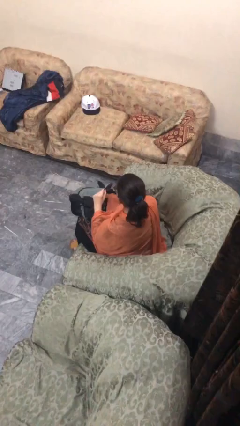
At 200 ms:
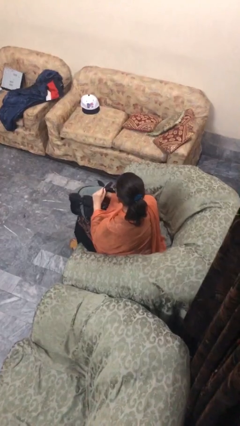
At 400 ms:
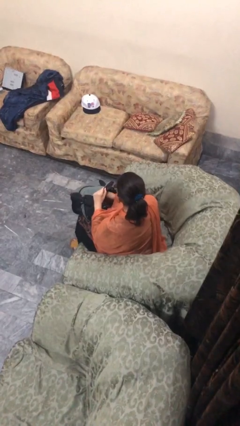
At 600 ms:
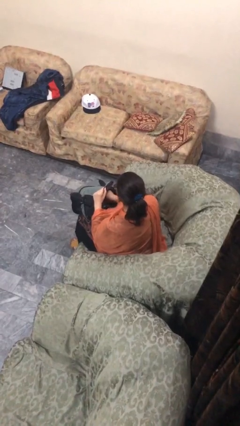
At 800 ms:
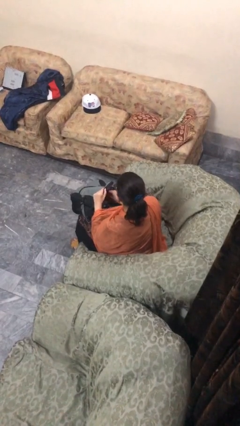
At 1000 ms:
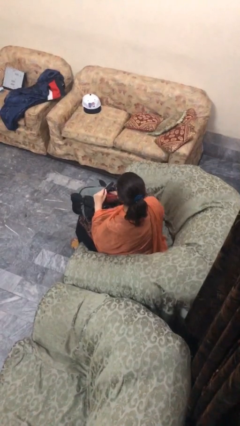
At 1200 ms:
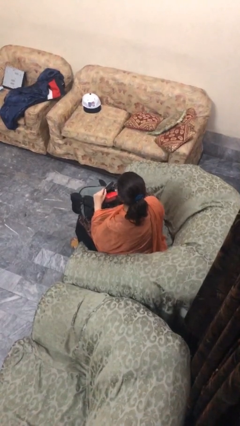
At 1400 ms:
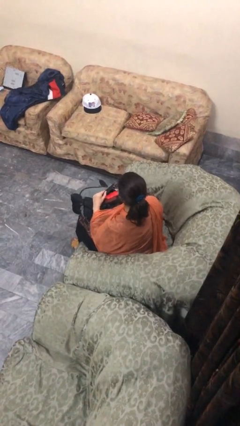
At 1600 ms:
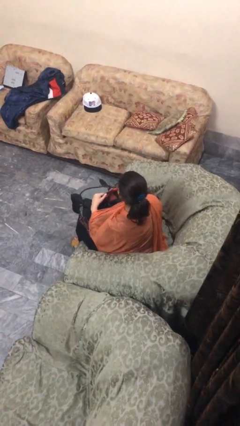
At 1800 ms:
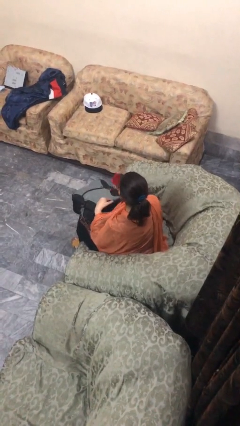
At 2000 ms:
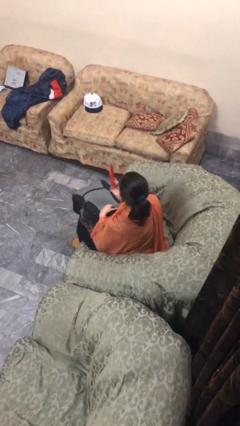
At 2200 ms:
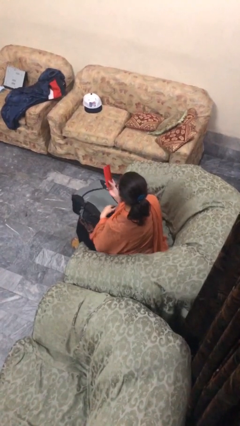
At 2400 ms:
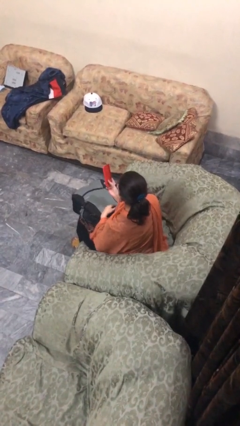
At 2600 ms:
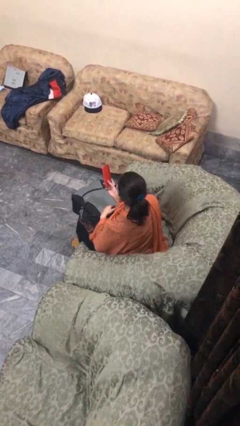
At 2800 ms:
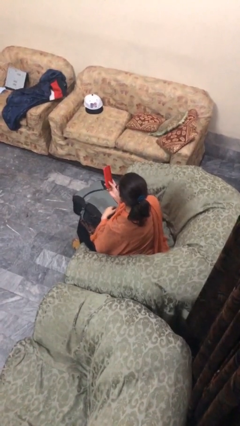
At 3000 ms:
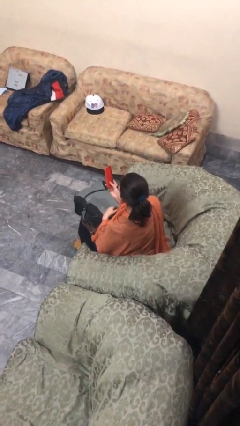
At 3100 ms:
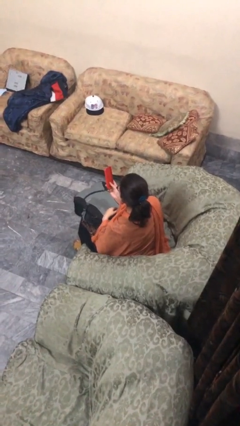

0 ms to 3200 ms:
person takes object from backpack

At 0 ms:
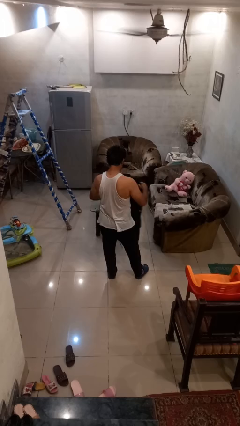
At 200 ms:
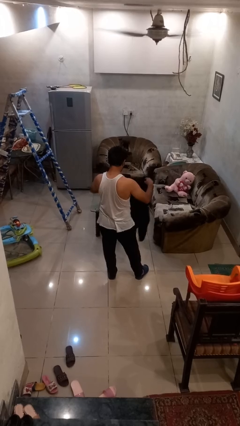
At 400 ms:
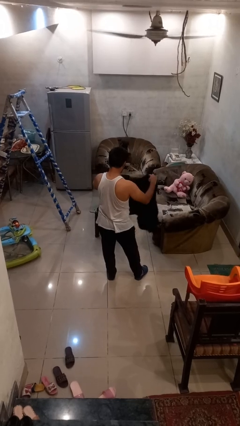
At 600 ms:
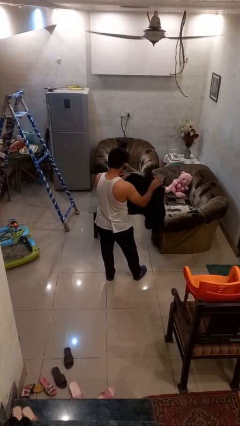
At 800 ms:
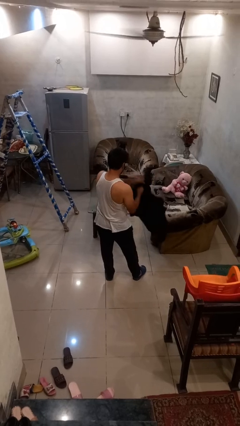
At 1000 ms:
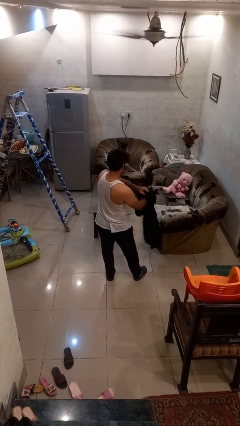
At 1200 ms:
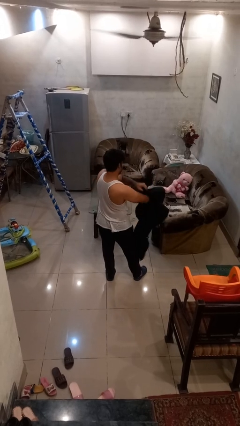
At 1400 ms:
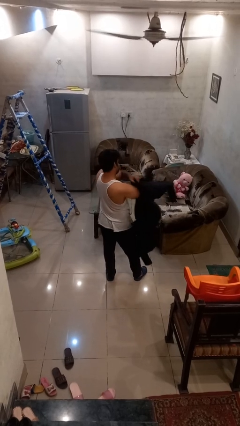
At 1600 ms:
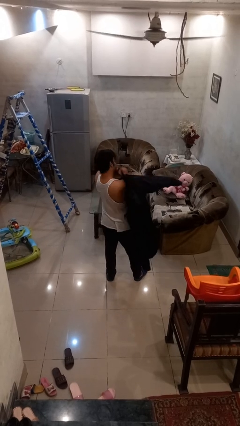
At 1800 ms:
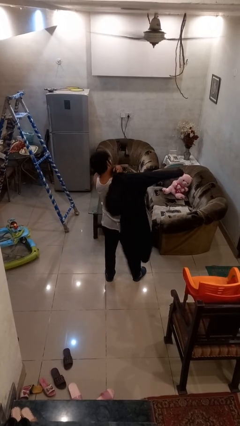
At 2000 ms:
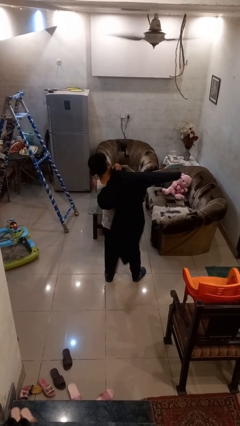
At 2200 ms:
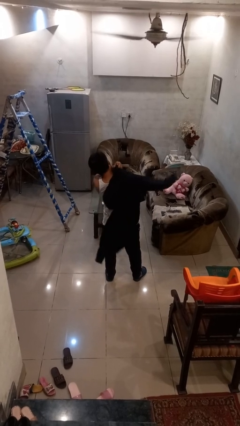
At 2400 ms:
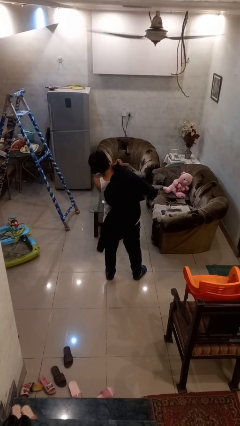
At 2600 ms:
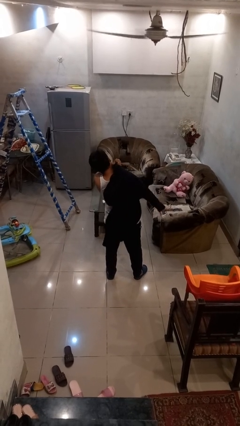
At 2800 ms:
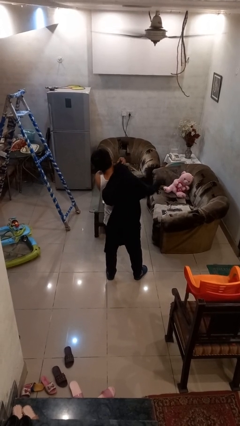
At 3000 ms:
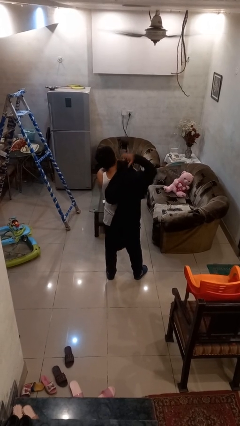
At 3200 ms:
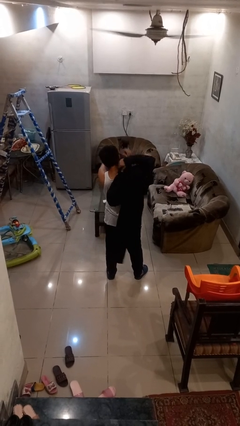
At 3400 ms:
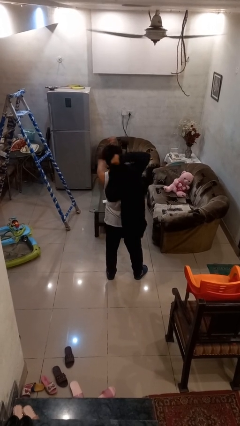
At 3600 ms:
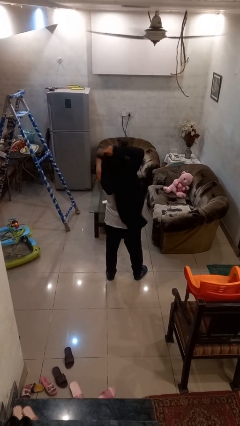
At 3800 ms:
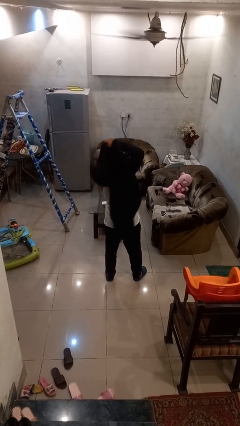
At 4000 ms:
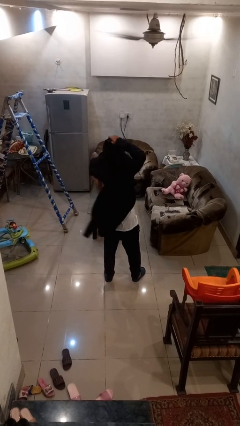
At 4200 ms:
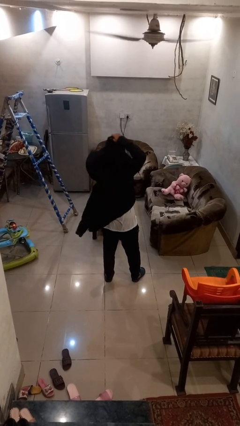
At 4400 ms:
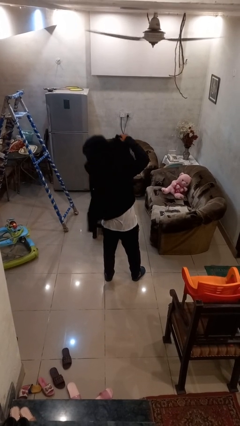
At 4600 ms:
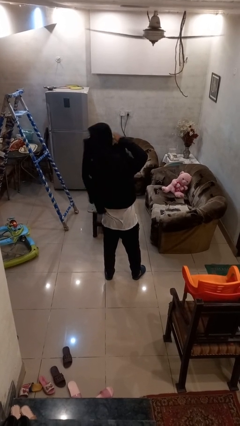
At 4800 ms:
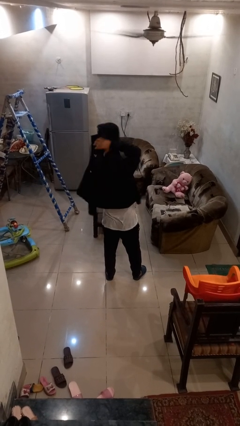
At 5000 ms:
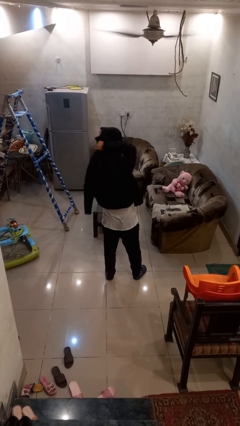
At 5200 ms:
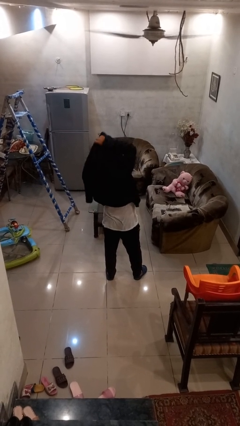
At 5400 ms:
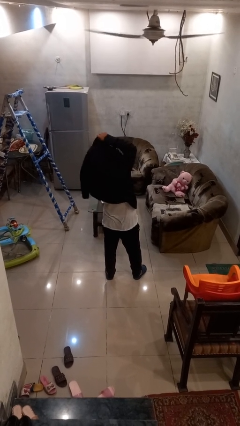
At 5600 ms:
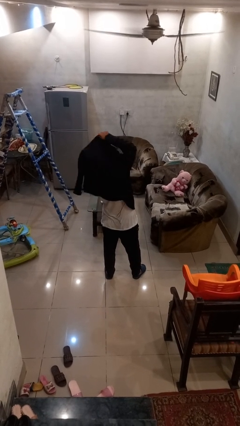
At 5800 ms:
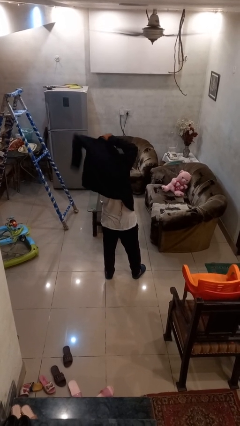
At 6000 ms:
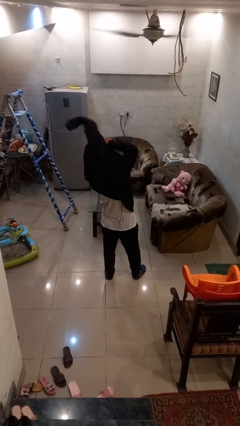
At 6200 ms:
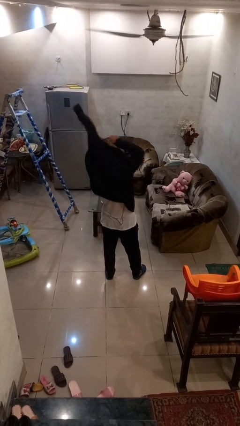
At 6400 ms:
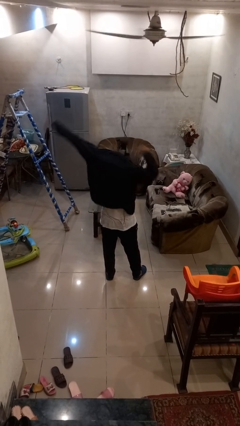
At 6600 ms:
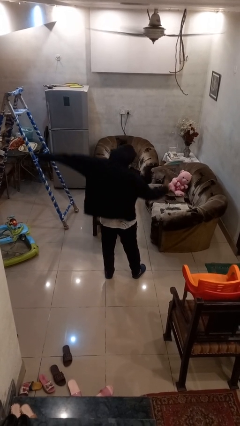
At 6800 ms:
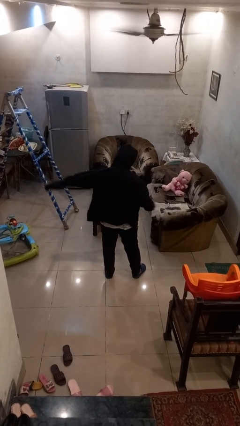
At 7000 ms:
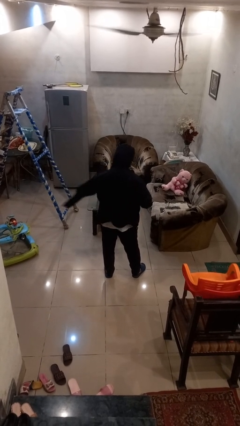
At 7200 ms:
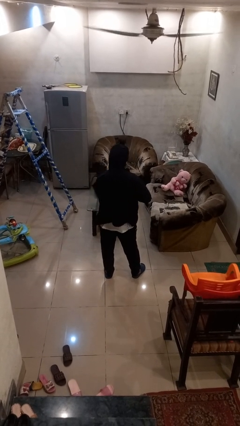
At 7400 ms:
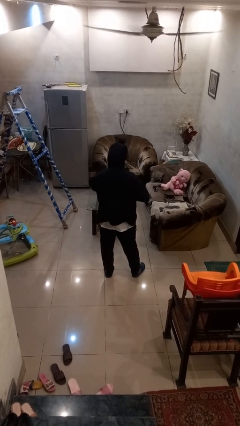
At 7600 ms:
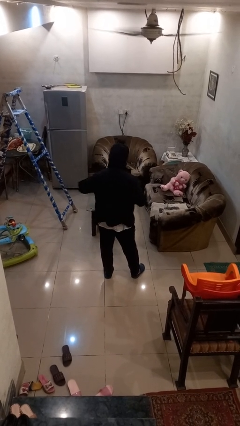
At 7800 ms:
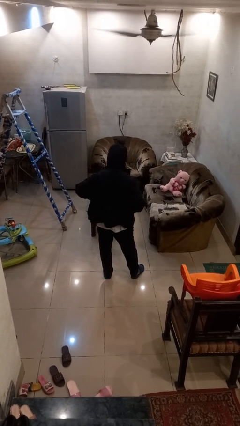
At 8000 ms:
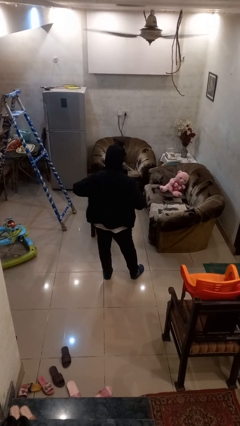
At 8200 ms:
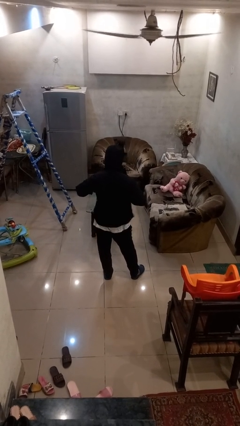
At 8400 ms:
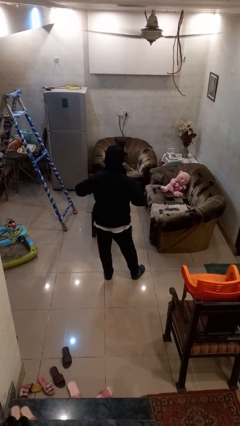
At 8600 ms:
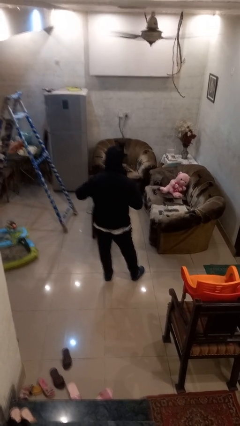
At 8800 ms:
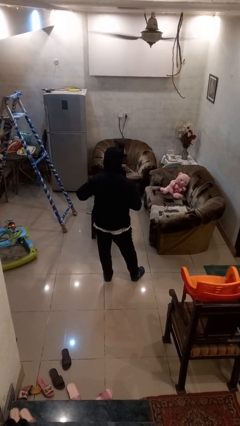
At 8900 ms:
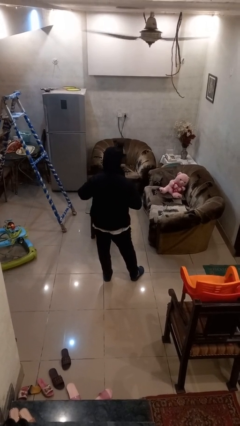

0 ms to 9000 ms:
person puts on hoodie

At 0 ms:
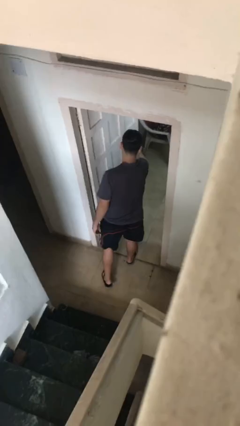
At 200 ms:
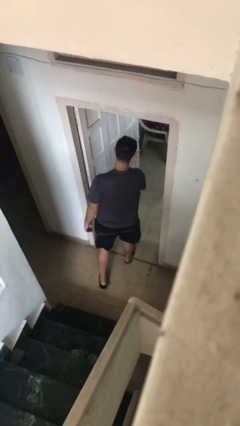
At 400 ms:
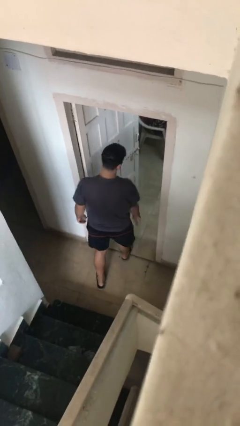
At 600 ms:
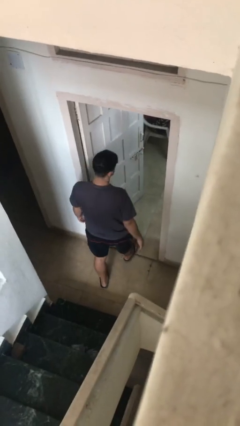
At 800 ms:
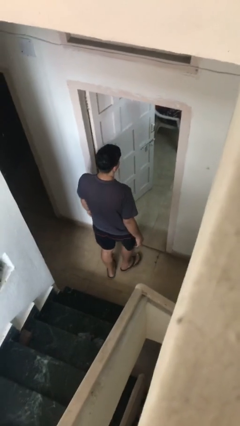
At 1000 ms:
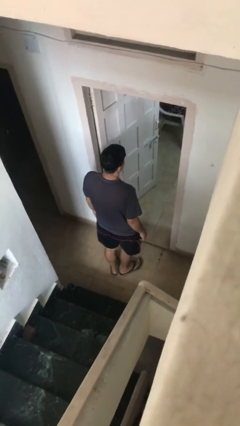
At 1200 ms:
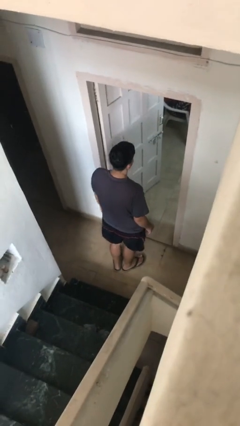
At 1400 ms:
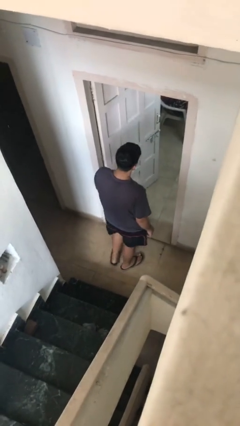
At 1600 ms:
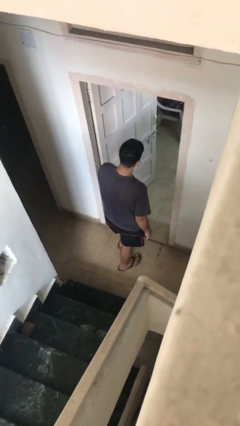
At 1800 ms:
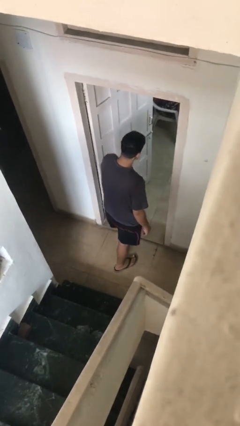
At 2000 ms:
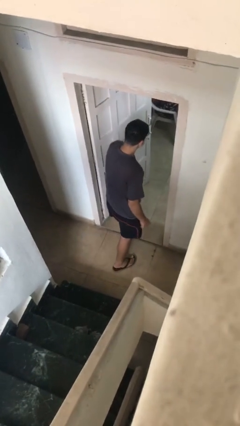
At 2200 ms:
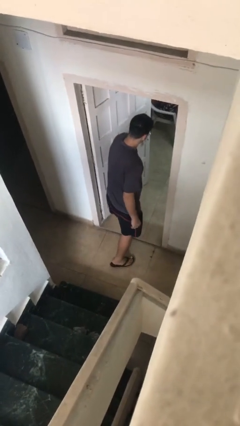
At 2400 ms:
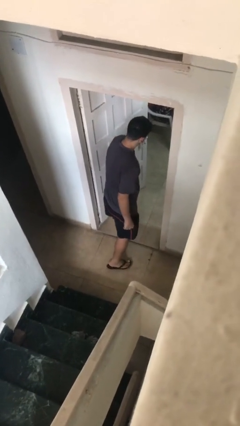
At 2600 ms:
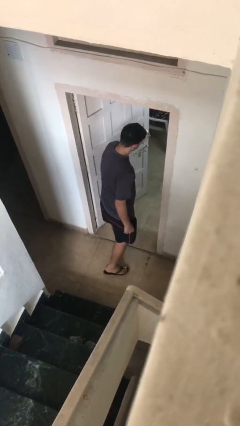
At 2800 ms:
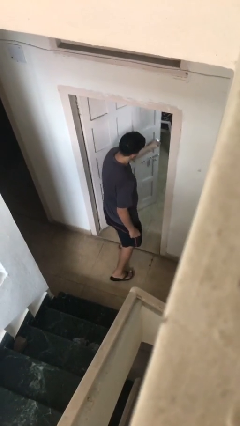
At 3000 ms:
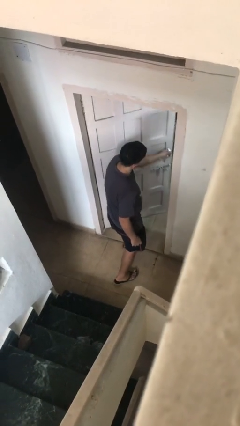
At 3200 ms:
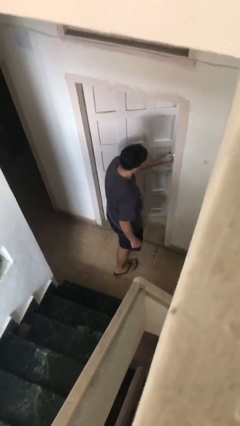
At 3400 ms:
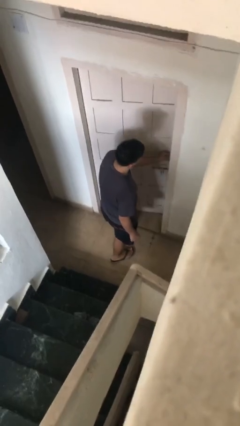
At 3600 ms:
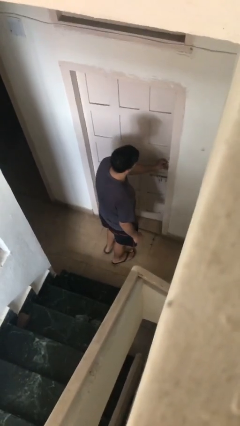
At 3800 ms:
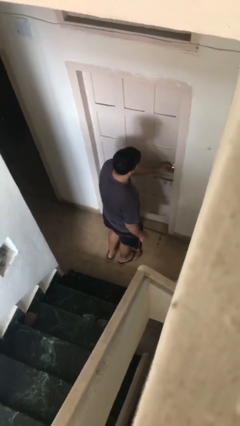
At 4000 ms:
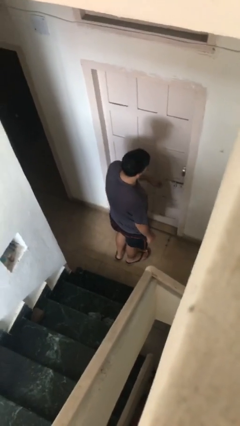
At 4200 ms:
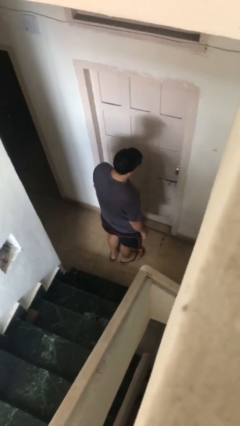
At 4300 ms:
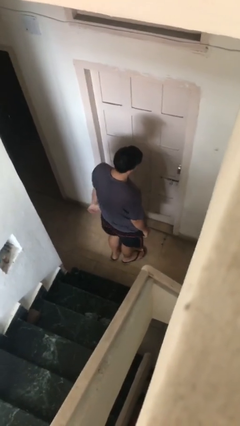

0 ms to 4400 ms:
person closes facility door

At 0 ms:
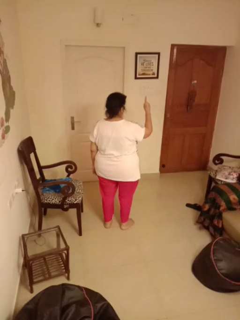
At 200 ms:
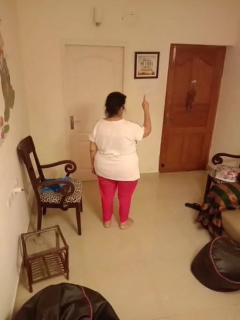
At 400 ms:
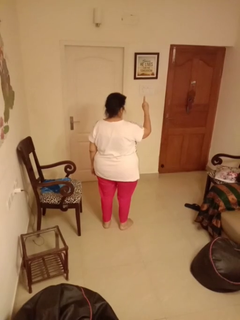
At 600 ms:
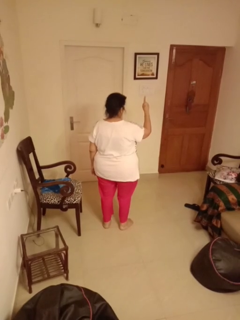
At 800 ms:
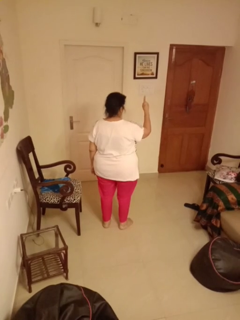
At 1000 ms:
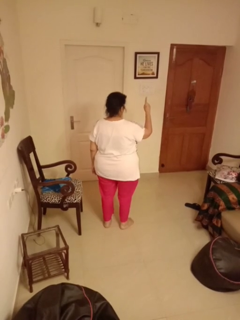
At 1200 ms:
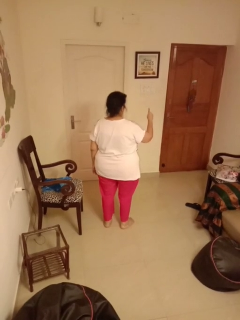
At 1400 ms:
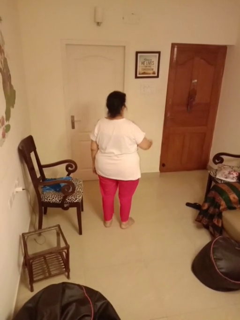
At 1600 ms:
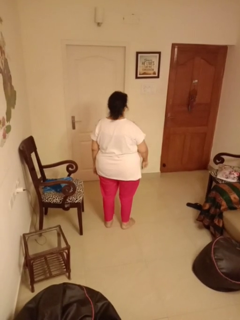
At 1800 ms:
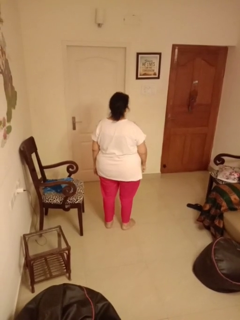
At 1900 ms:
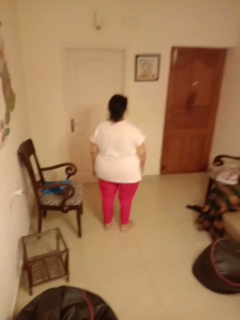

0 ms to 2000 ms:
person gestures number one
